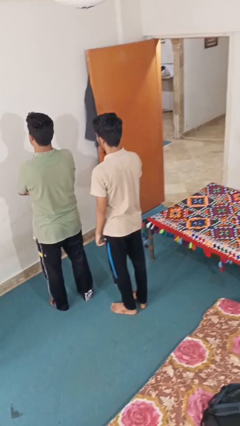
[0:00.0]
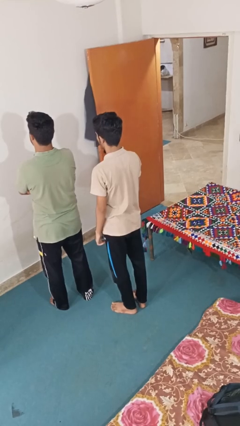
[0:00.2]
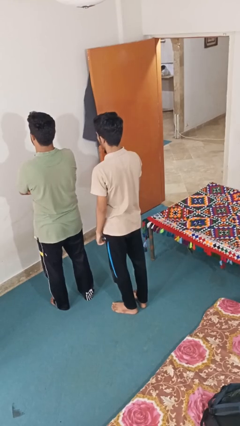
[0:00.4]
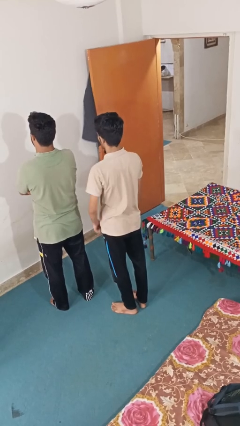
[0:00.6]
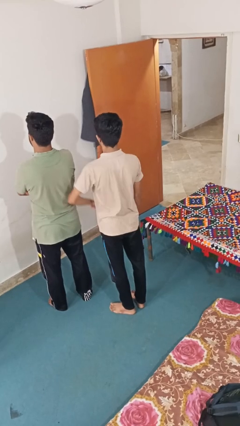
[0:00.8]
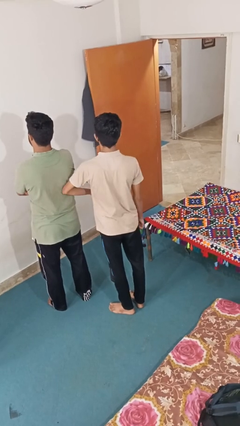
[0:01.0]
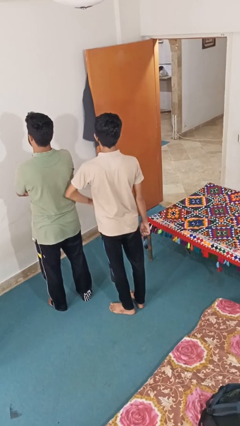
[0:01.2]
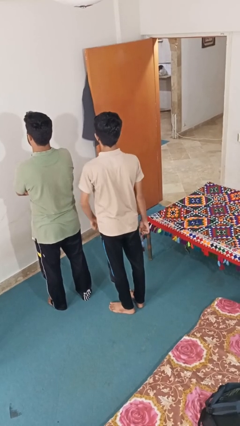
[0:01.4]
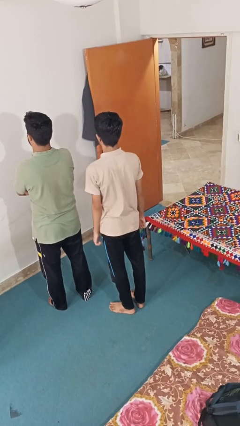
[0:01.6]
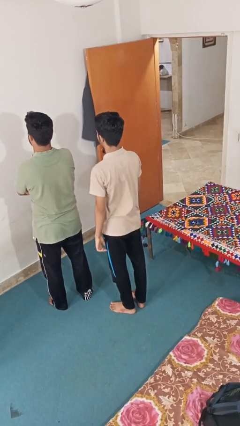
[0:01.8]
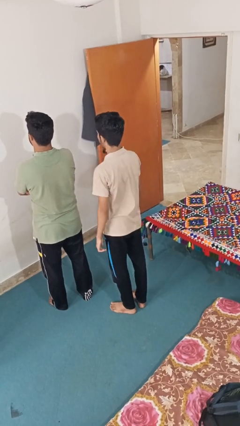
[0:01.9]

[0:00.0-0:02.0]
person nudges person with elbow

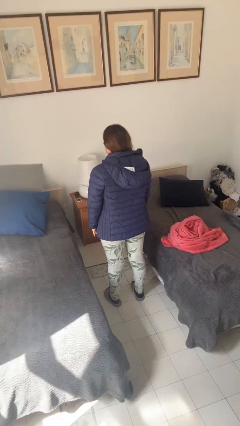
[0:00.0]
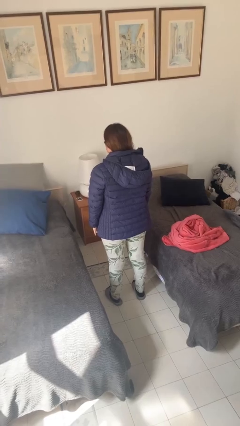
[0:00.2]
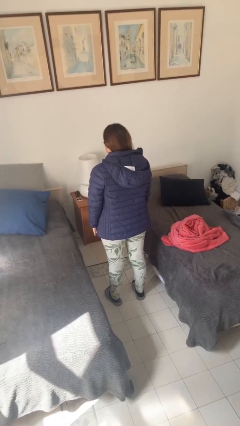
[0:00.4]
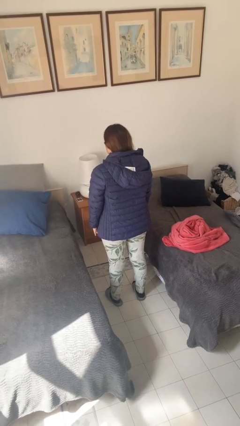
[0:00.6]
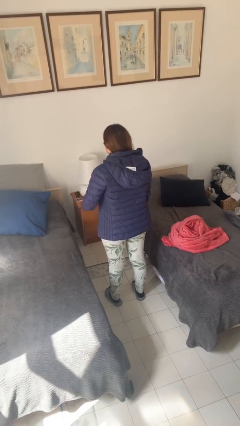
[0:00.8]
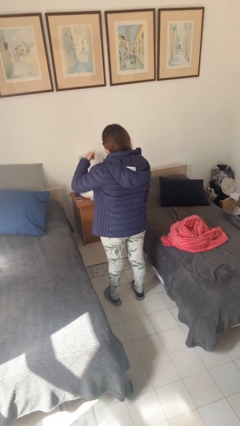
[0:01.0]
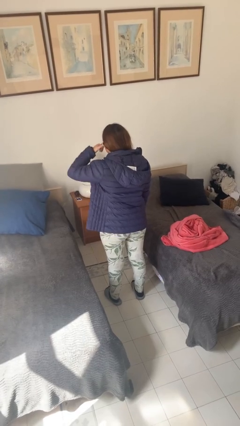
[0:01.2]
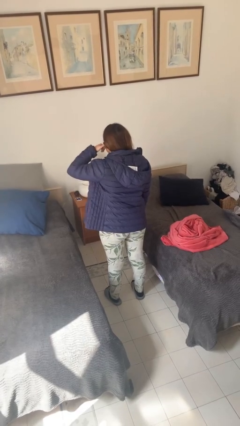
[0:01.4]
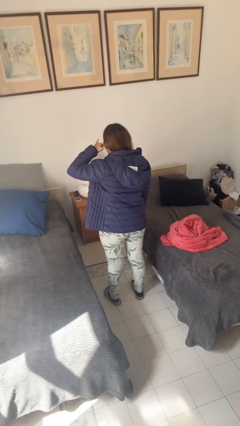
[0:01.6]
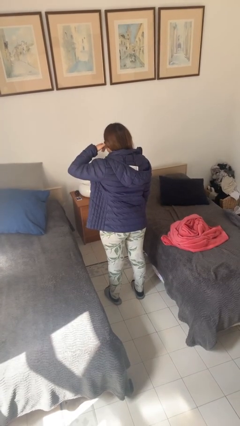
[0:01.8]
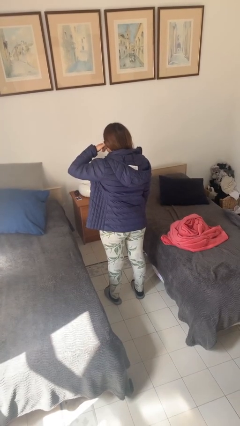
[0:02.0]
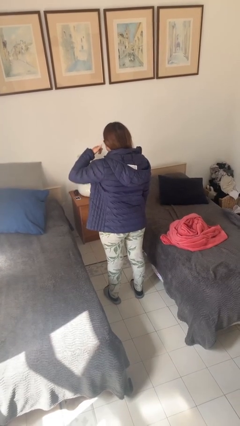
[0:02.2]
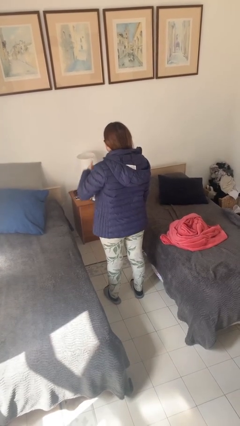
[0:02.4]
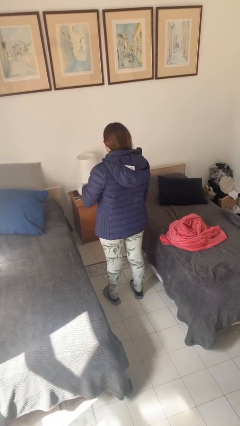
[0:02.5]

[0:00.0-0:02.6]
person gestures call me

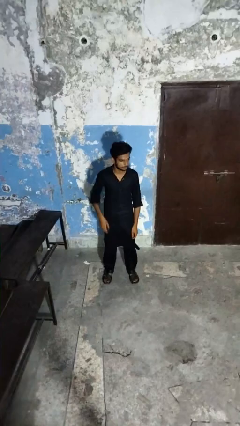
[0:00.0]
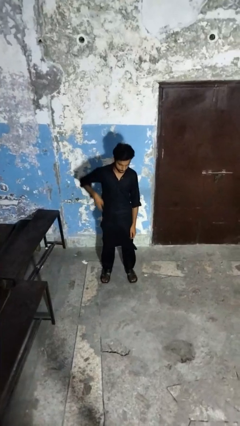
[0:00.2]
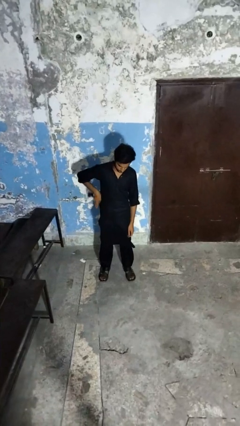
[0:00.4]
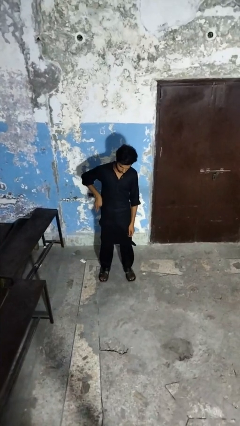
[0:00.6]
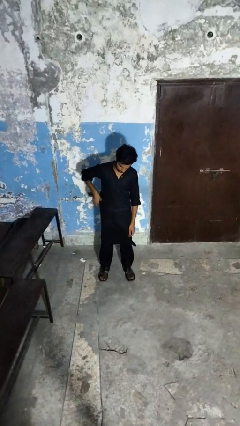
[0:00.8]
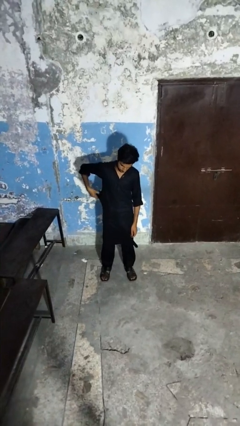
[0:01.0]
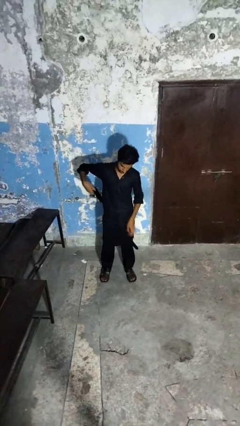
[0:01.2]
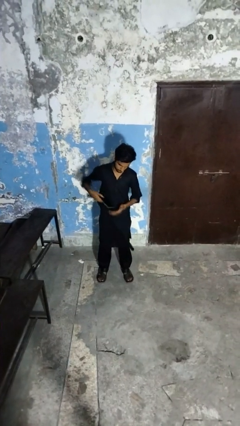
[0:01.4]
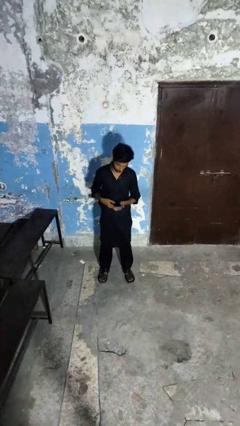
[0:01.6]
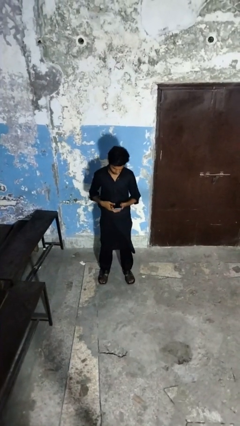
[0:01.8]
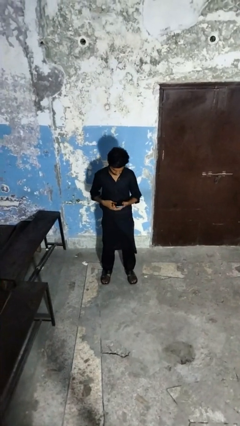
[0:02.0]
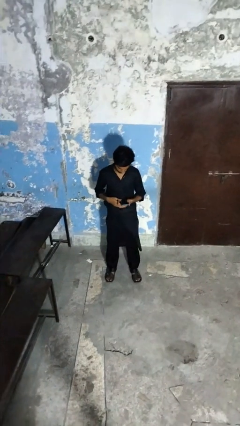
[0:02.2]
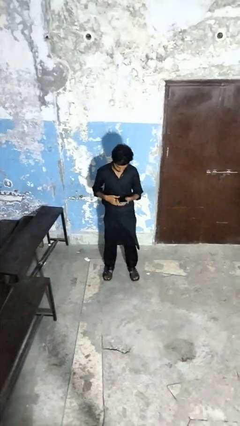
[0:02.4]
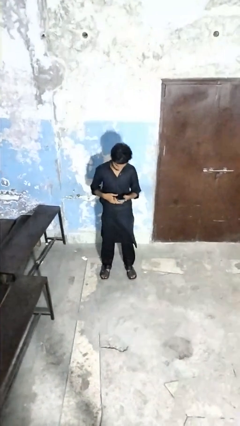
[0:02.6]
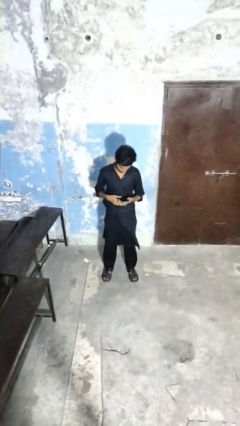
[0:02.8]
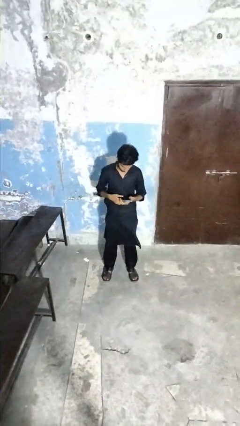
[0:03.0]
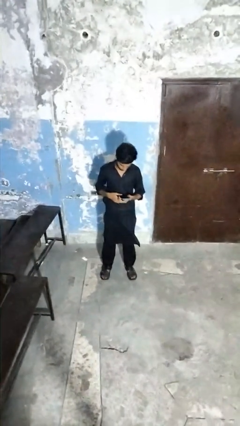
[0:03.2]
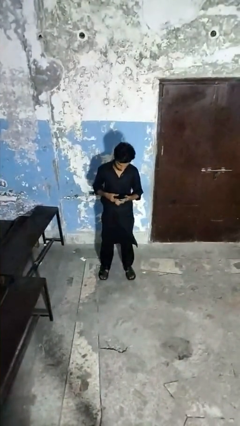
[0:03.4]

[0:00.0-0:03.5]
person takes phone from pocket

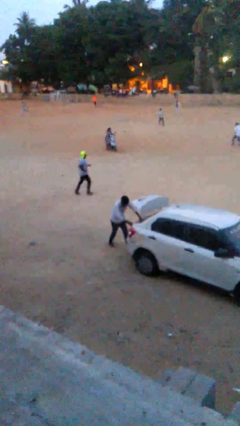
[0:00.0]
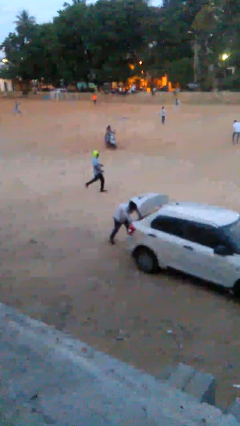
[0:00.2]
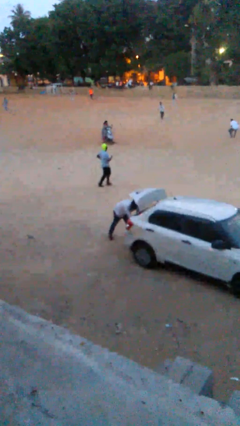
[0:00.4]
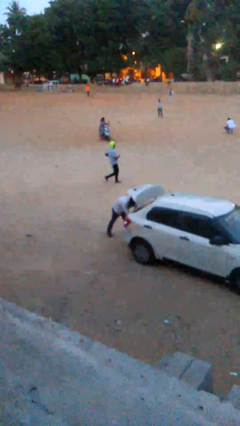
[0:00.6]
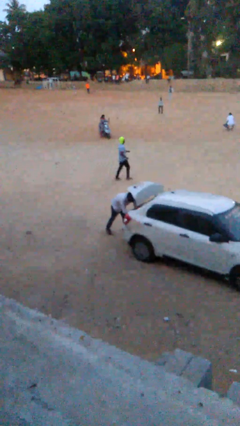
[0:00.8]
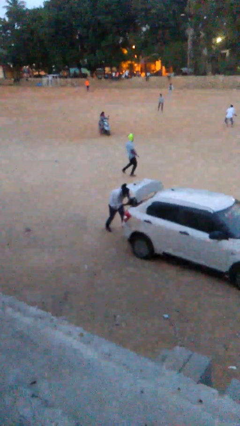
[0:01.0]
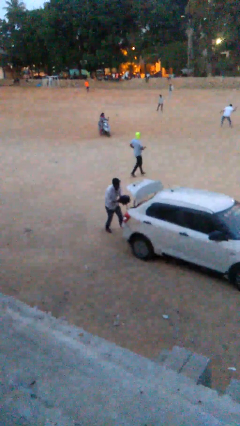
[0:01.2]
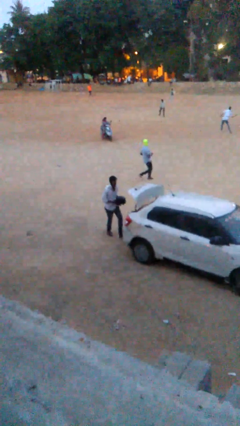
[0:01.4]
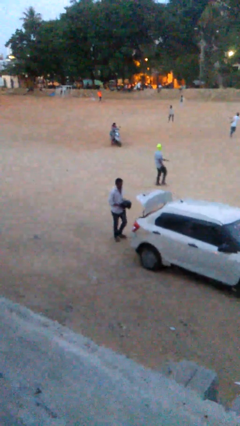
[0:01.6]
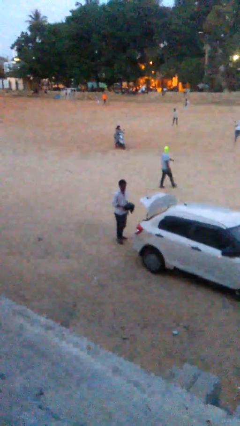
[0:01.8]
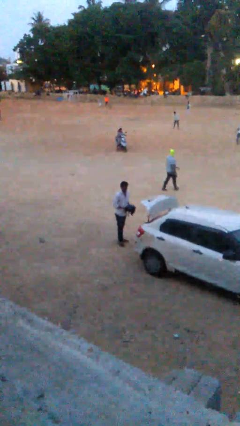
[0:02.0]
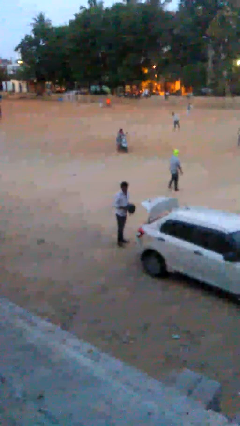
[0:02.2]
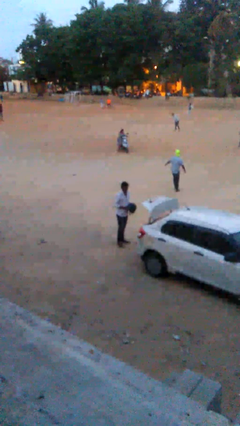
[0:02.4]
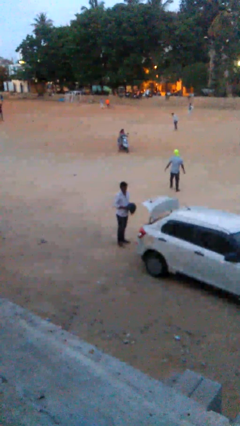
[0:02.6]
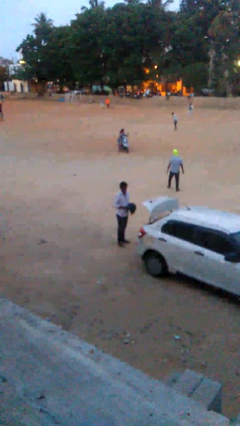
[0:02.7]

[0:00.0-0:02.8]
person unloads car

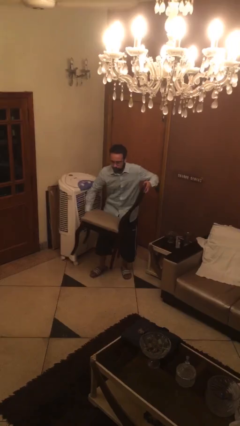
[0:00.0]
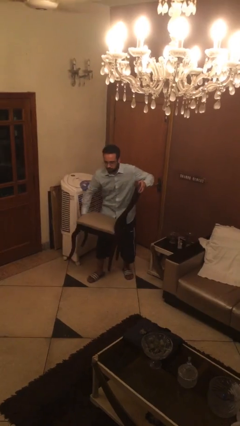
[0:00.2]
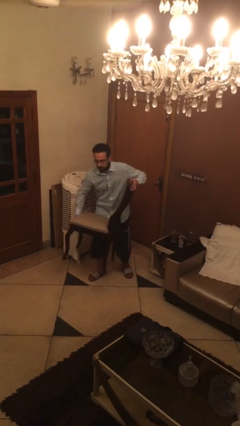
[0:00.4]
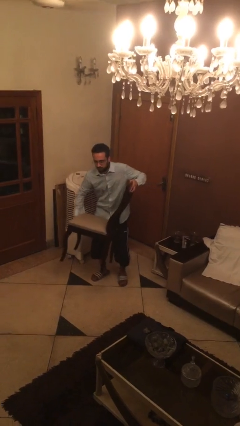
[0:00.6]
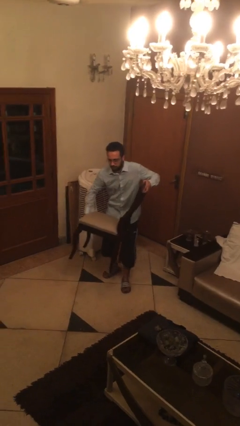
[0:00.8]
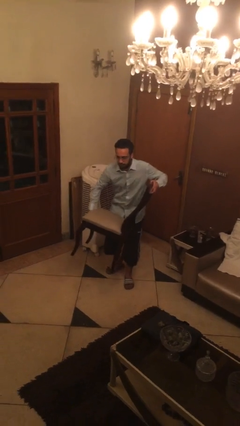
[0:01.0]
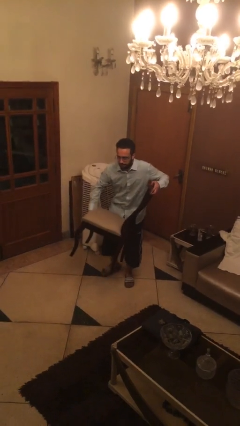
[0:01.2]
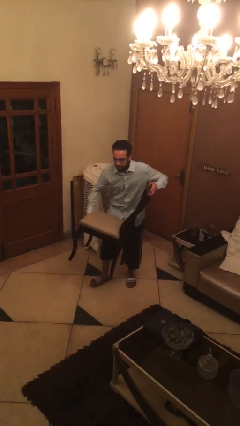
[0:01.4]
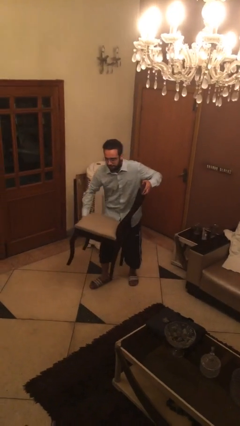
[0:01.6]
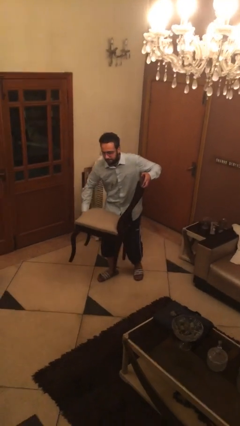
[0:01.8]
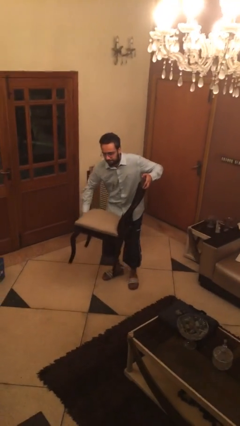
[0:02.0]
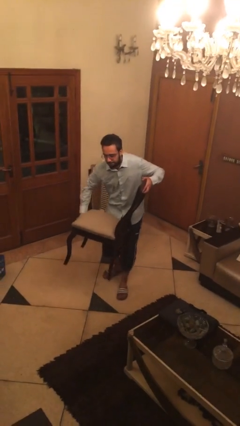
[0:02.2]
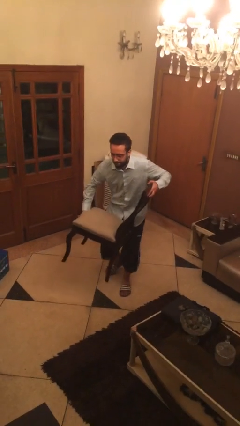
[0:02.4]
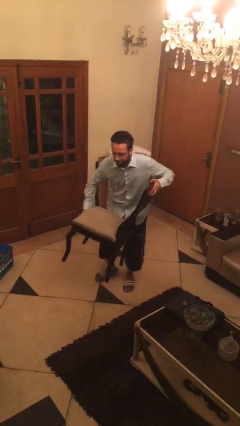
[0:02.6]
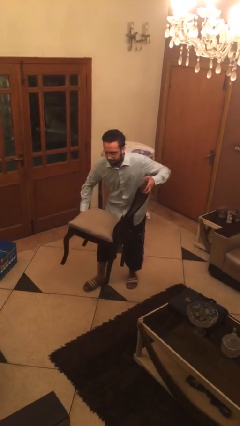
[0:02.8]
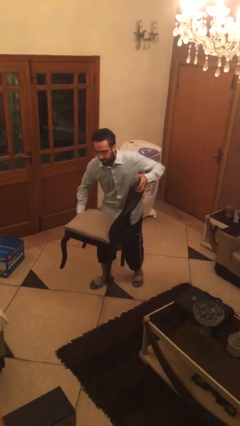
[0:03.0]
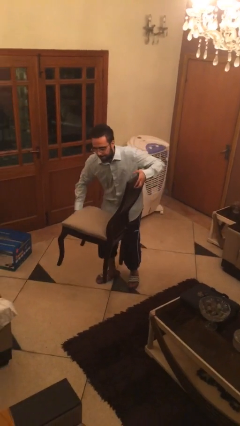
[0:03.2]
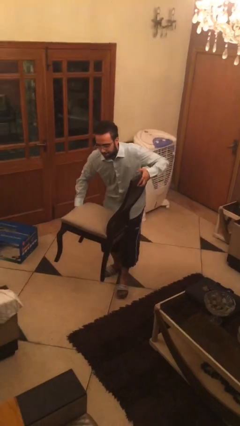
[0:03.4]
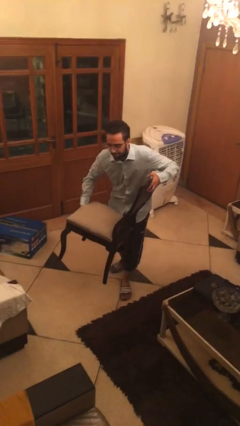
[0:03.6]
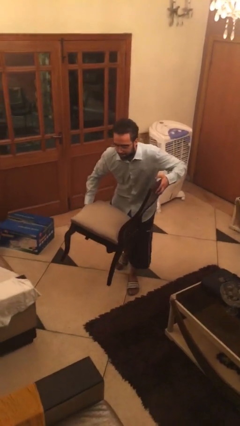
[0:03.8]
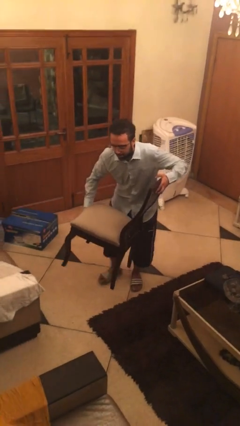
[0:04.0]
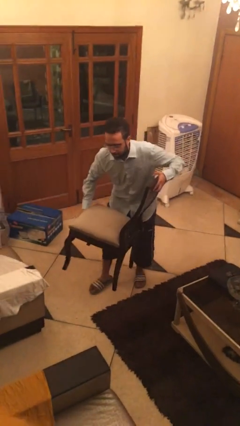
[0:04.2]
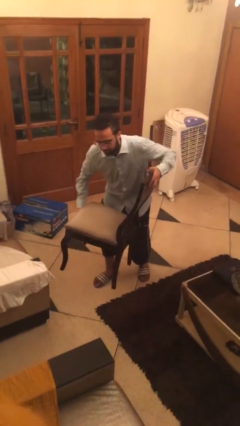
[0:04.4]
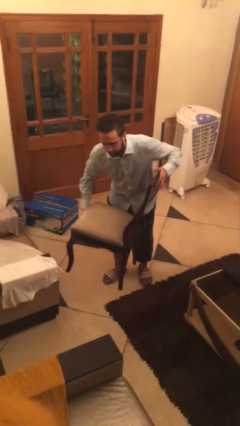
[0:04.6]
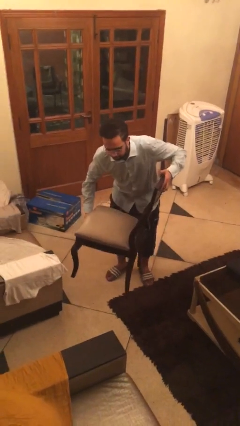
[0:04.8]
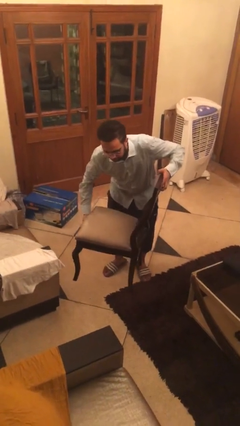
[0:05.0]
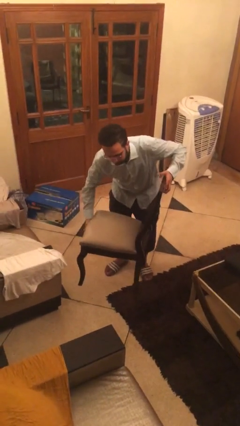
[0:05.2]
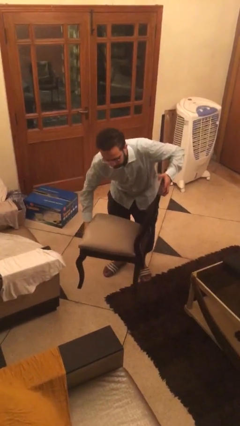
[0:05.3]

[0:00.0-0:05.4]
person carries heavy object

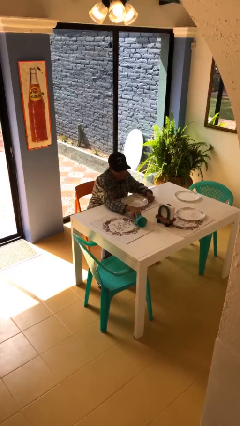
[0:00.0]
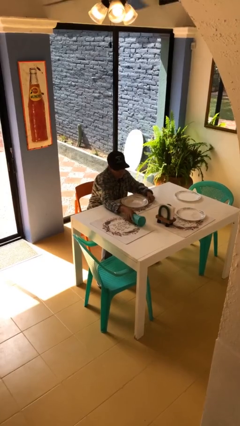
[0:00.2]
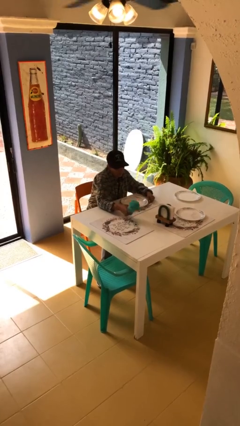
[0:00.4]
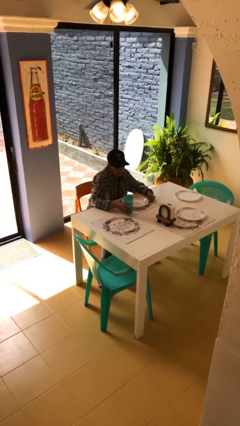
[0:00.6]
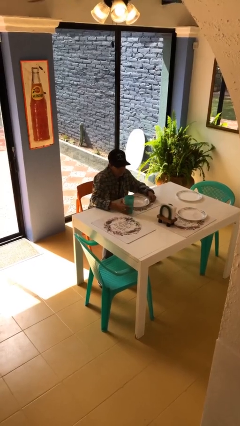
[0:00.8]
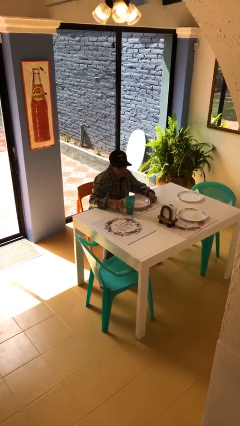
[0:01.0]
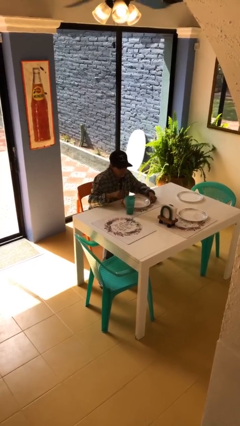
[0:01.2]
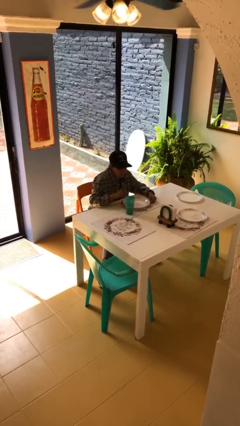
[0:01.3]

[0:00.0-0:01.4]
person sets upright glass
